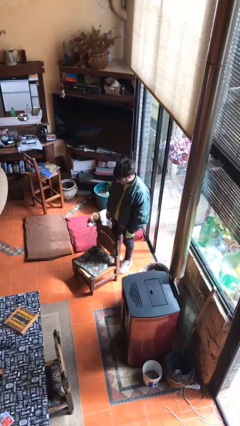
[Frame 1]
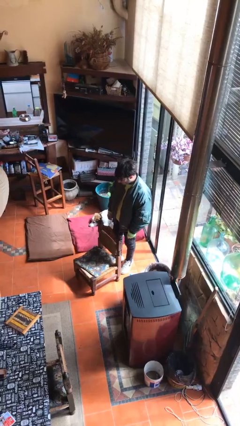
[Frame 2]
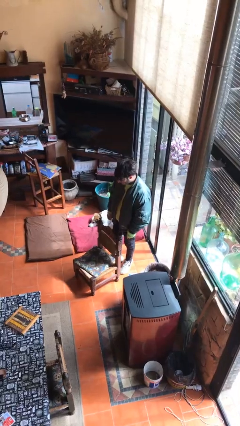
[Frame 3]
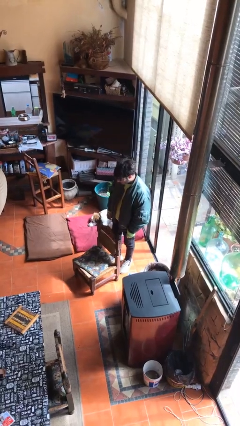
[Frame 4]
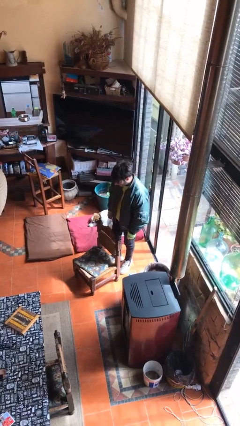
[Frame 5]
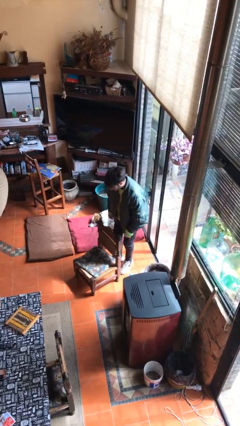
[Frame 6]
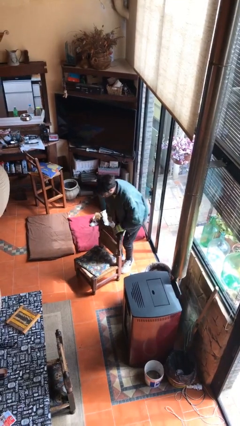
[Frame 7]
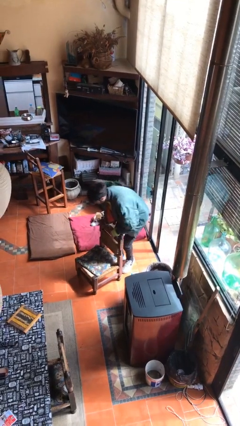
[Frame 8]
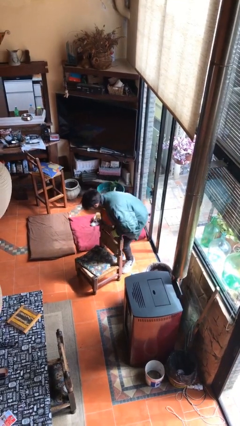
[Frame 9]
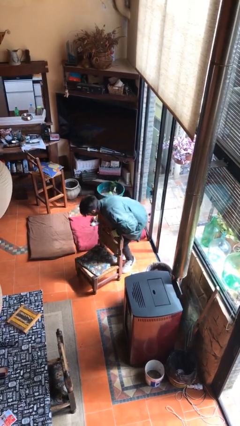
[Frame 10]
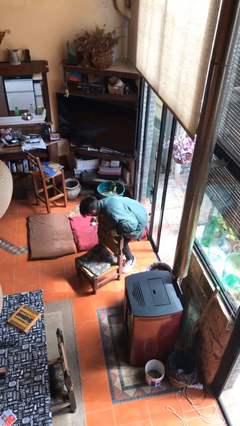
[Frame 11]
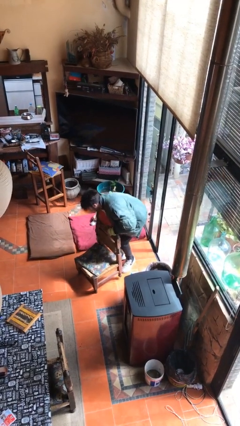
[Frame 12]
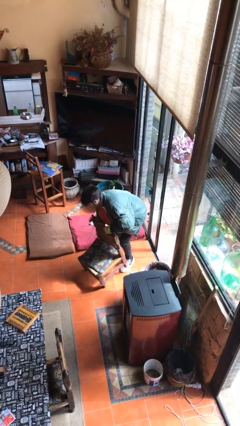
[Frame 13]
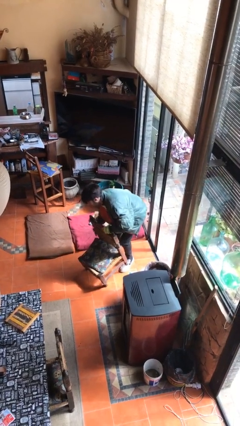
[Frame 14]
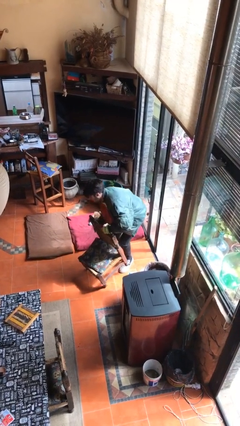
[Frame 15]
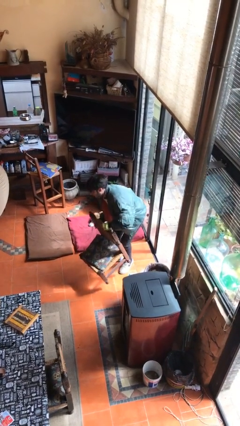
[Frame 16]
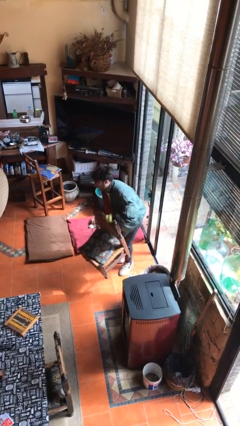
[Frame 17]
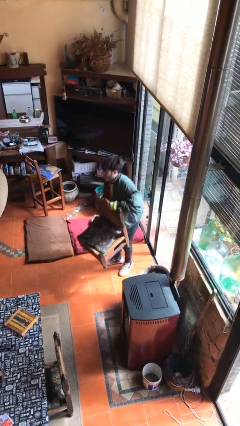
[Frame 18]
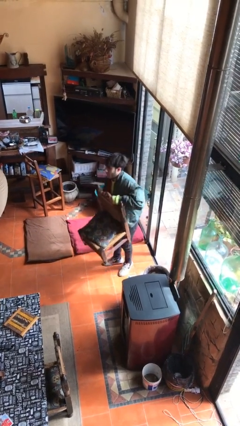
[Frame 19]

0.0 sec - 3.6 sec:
person picks up object from floor

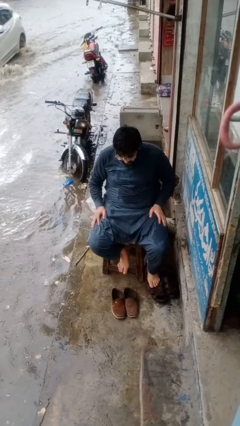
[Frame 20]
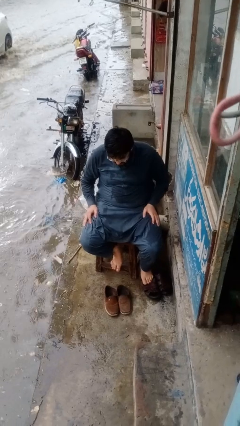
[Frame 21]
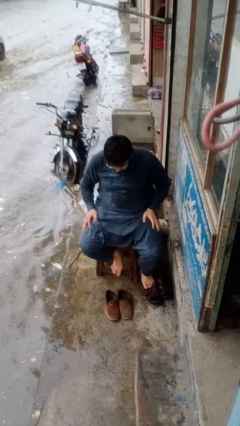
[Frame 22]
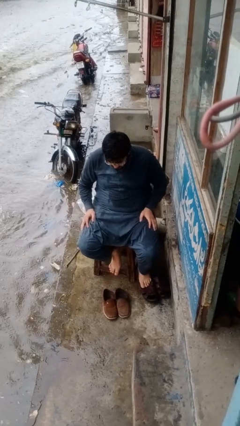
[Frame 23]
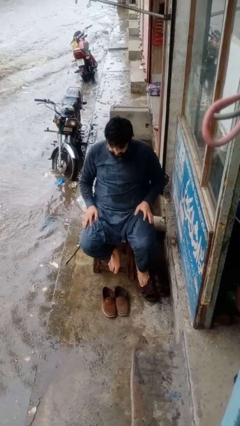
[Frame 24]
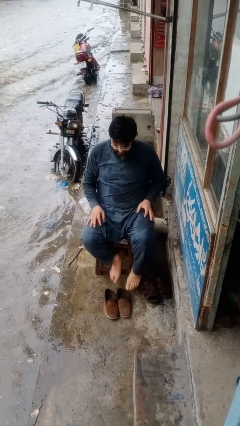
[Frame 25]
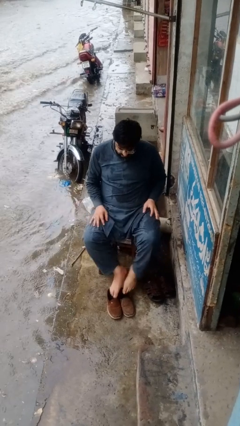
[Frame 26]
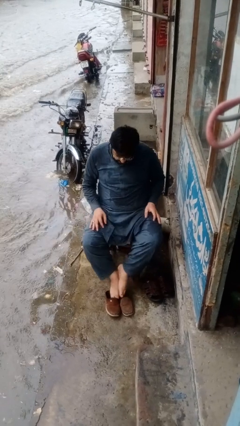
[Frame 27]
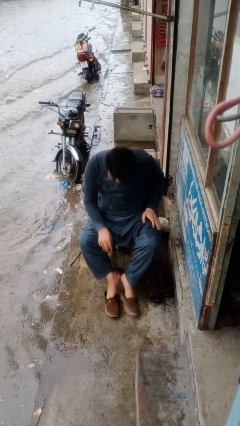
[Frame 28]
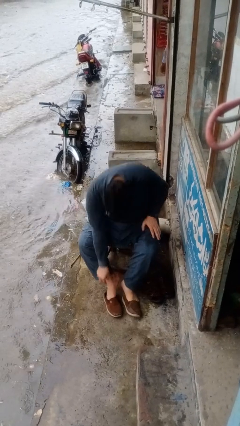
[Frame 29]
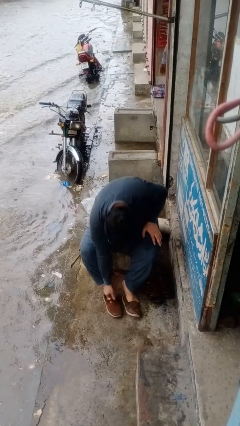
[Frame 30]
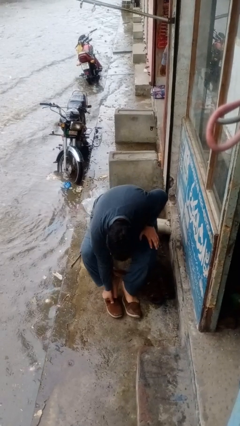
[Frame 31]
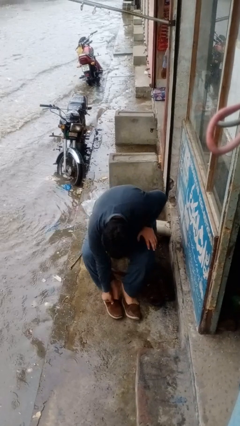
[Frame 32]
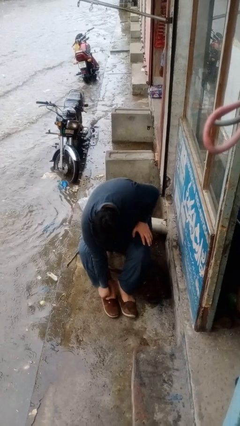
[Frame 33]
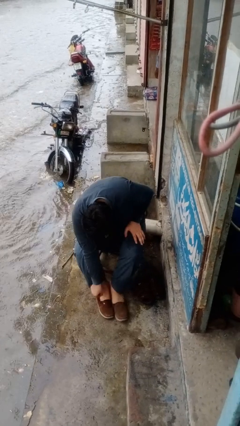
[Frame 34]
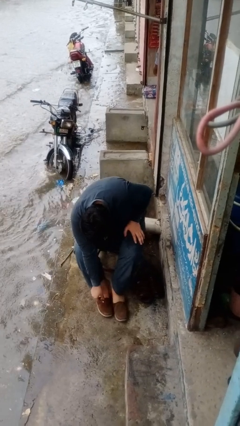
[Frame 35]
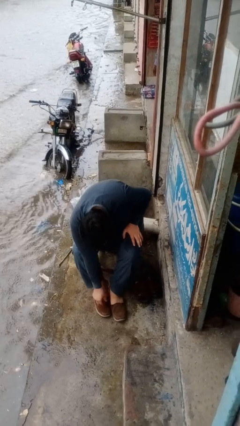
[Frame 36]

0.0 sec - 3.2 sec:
person puts on shoes

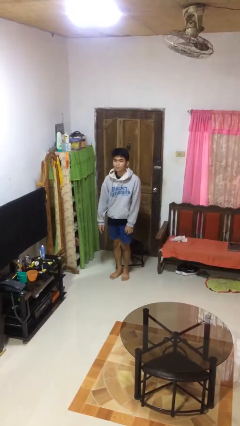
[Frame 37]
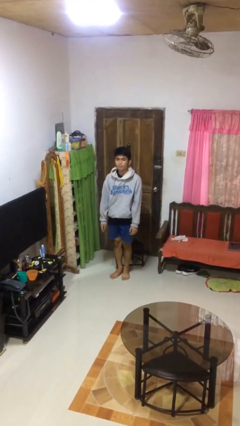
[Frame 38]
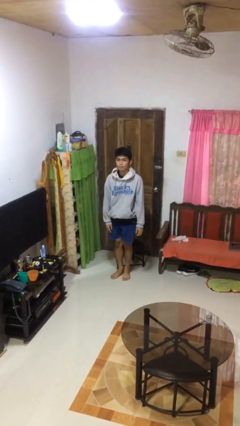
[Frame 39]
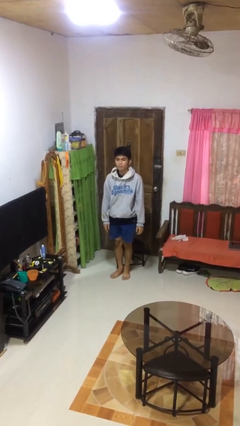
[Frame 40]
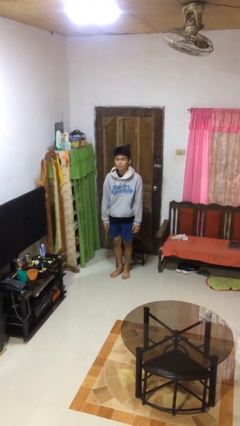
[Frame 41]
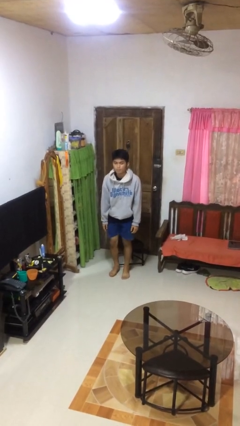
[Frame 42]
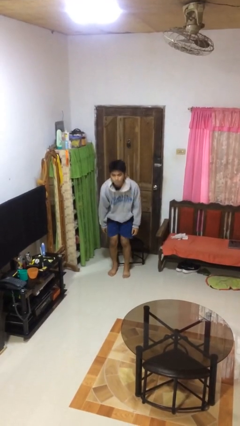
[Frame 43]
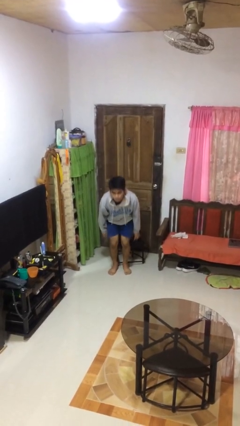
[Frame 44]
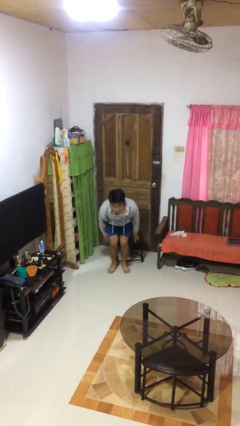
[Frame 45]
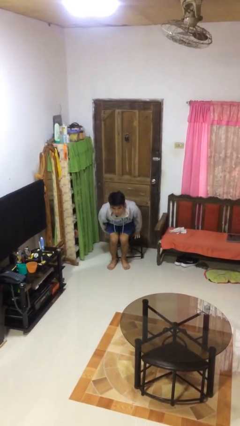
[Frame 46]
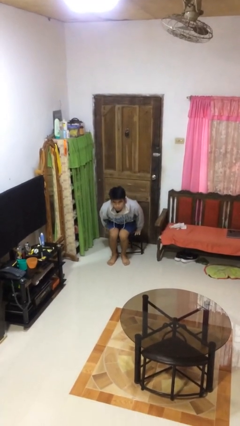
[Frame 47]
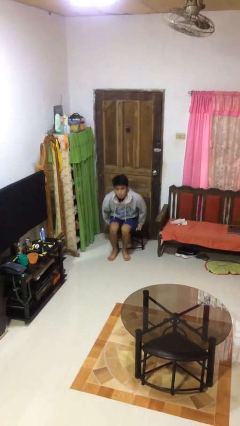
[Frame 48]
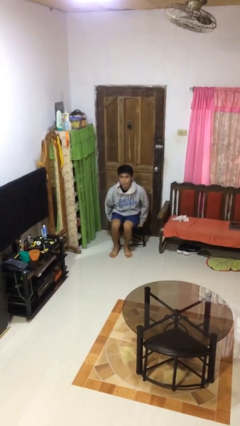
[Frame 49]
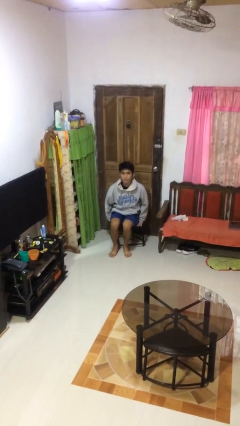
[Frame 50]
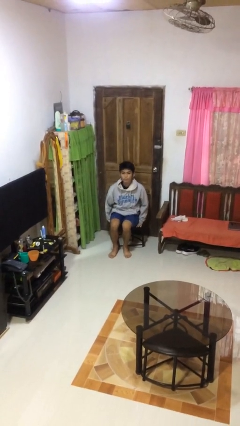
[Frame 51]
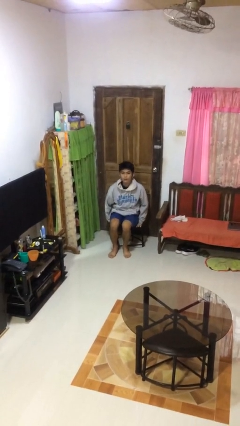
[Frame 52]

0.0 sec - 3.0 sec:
person sits down

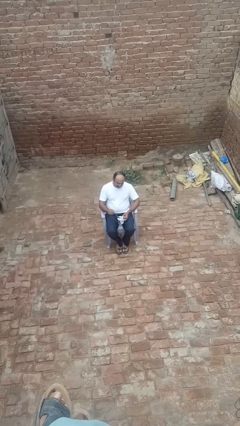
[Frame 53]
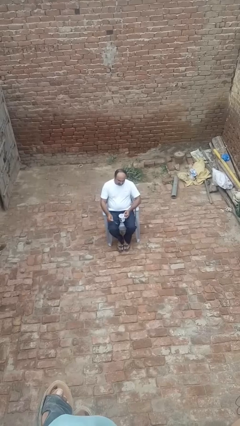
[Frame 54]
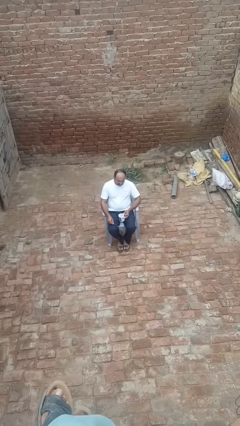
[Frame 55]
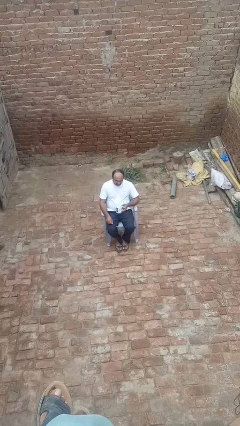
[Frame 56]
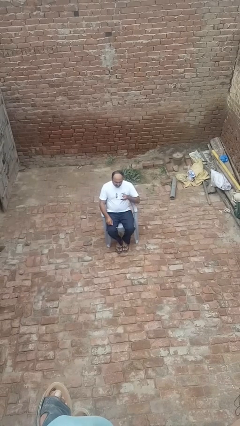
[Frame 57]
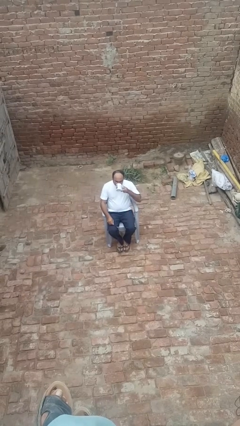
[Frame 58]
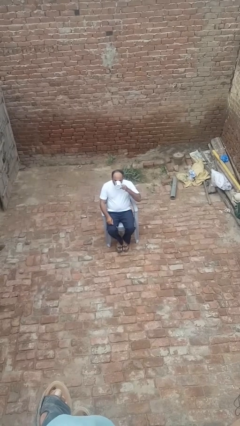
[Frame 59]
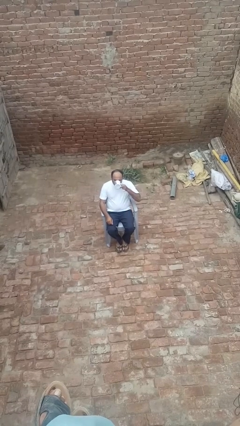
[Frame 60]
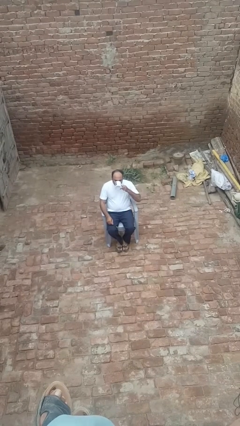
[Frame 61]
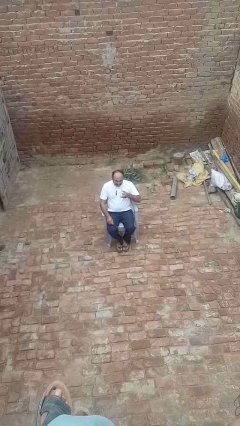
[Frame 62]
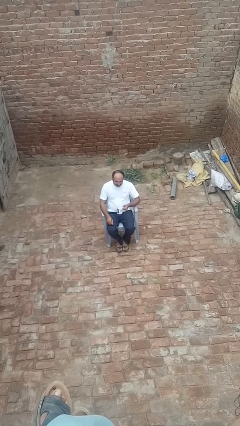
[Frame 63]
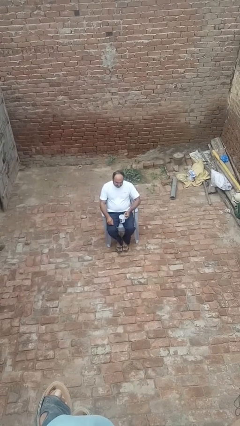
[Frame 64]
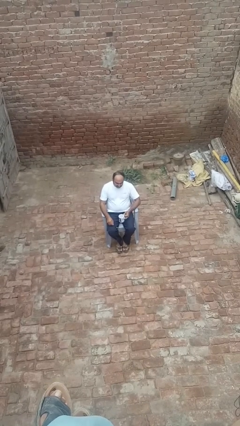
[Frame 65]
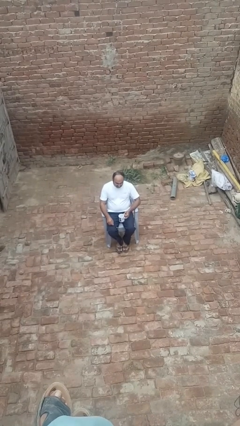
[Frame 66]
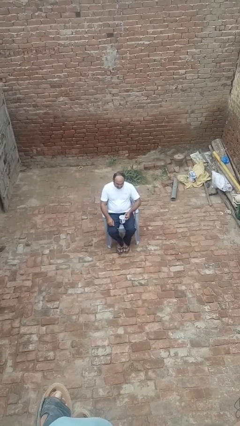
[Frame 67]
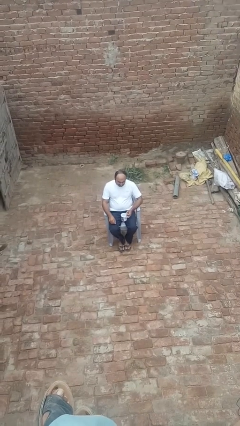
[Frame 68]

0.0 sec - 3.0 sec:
person drinks from mug

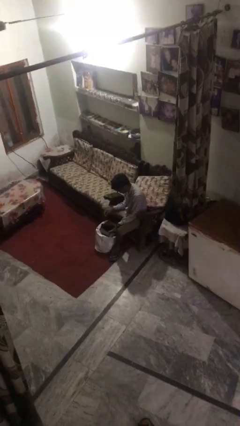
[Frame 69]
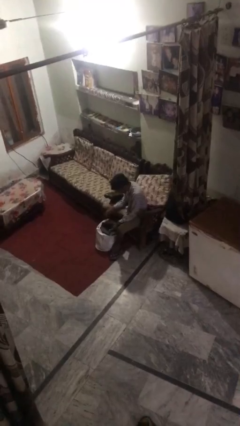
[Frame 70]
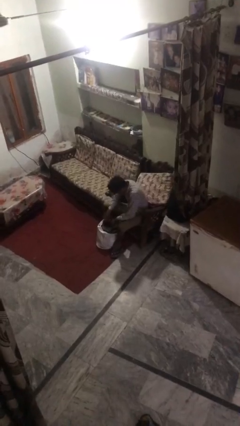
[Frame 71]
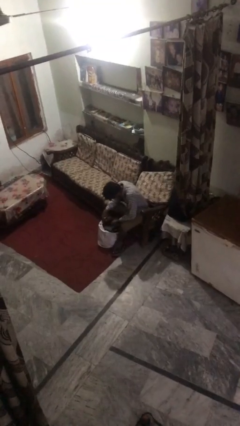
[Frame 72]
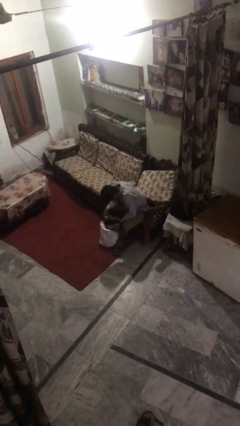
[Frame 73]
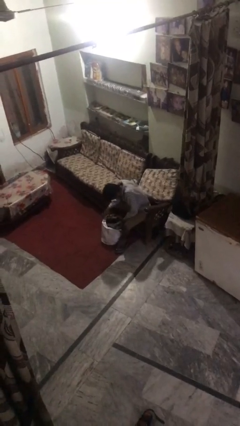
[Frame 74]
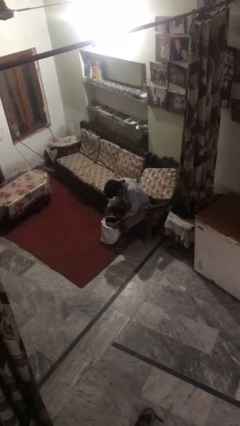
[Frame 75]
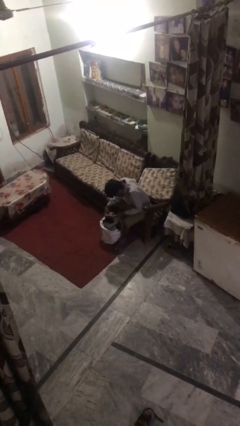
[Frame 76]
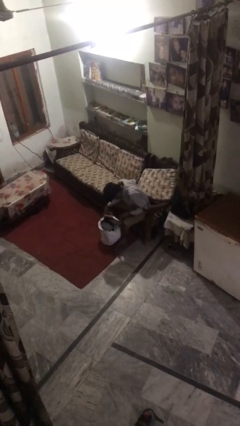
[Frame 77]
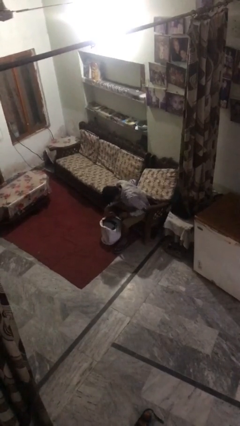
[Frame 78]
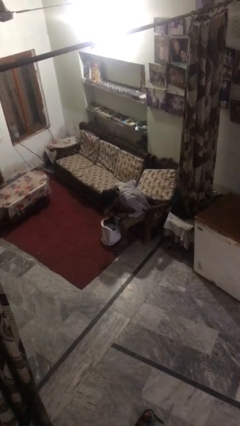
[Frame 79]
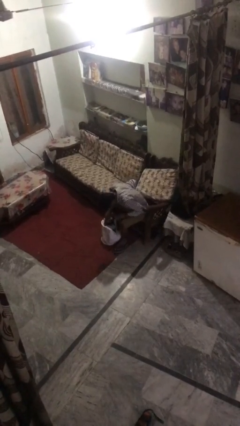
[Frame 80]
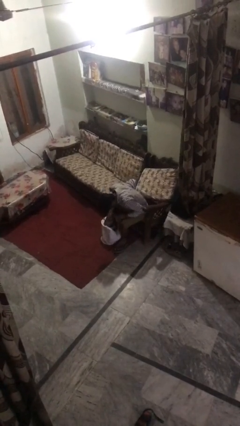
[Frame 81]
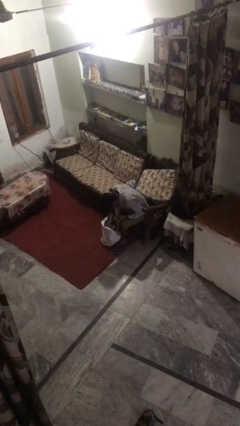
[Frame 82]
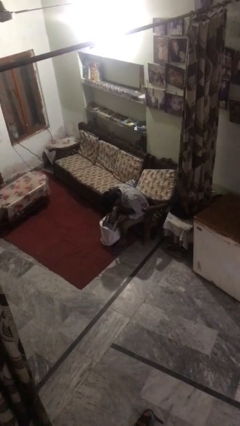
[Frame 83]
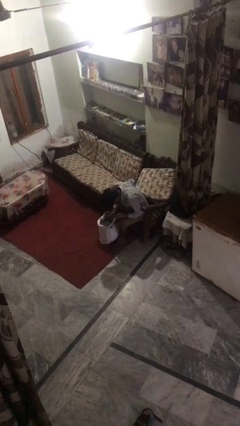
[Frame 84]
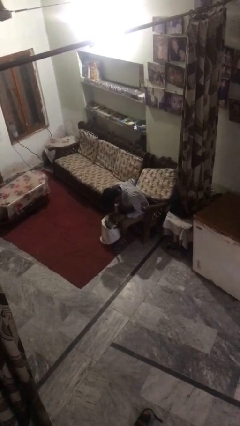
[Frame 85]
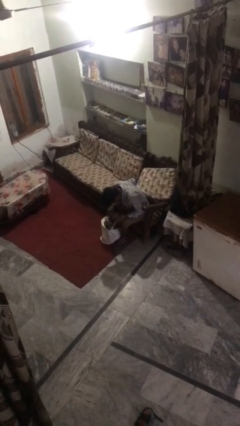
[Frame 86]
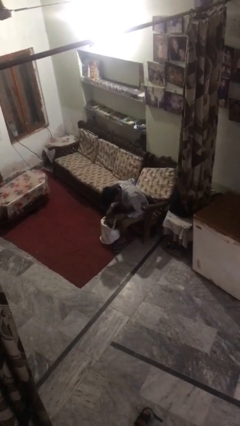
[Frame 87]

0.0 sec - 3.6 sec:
person searches under bed

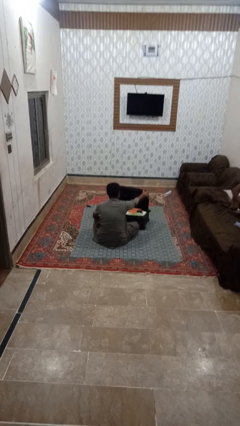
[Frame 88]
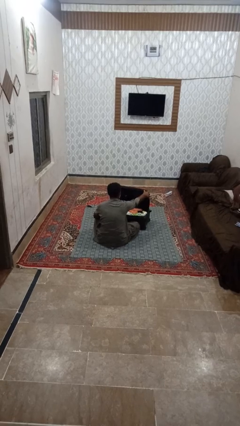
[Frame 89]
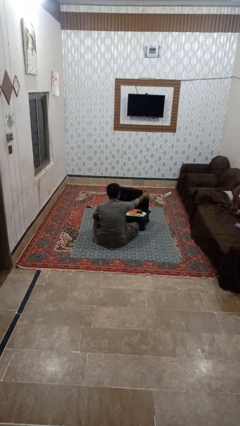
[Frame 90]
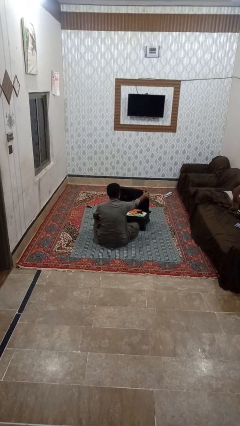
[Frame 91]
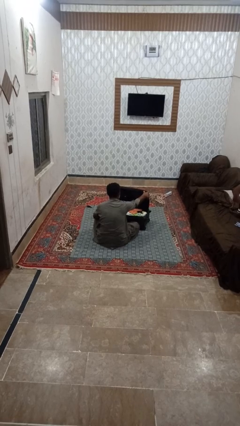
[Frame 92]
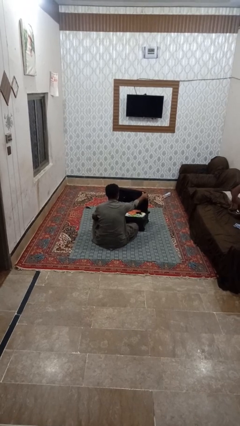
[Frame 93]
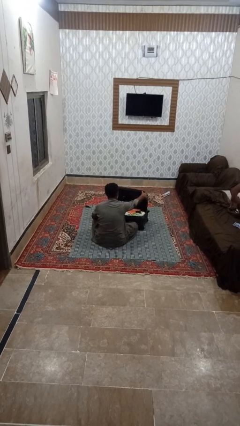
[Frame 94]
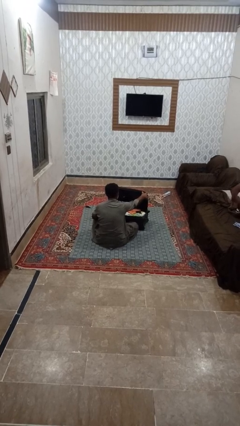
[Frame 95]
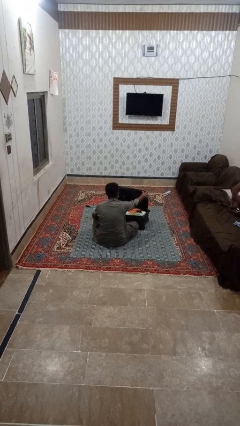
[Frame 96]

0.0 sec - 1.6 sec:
person opens suitcase
